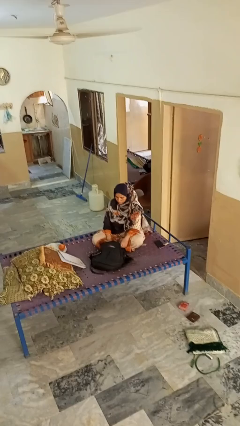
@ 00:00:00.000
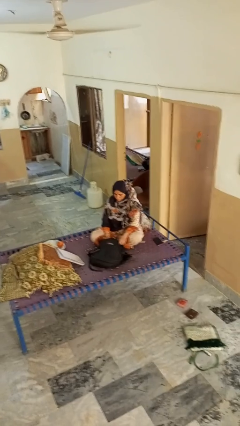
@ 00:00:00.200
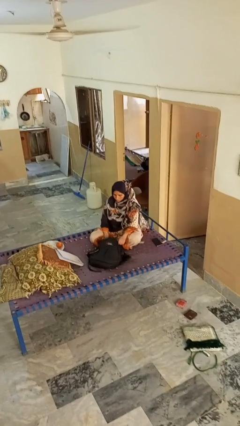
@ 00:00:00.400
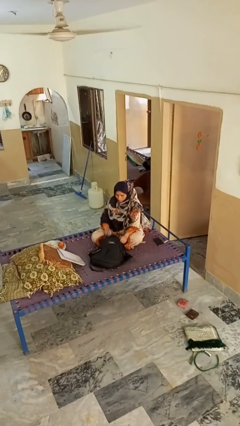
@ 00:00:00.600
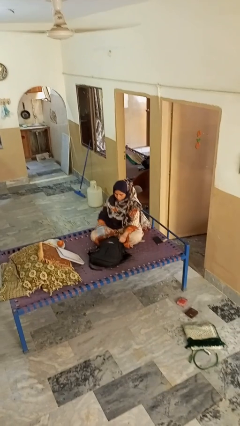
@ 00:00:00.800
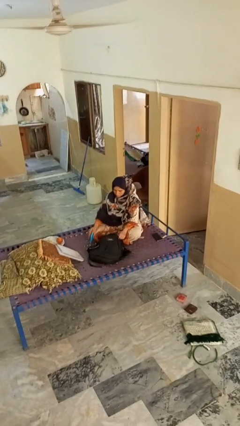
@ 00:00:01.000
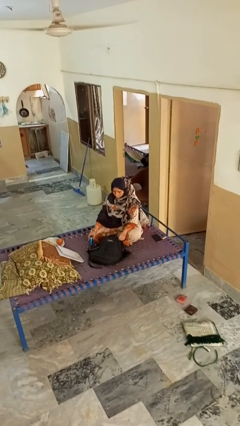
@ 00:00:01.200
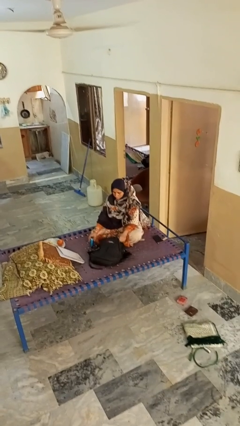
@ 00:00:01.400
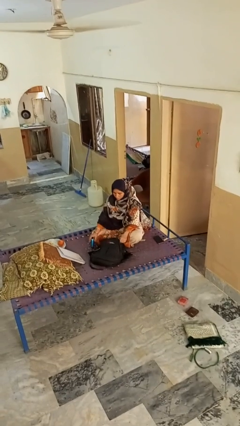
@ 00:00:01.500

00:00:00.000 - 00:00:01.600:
person takes object from bag

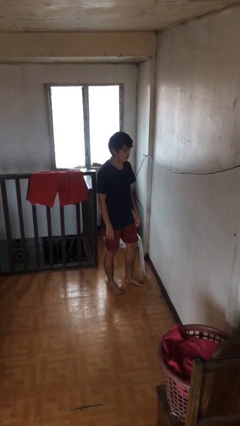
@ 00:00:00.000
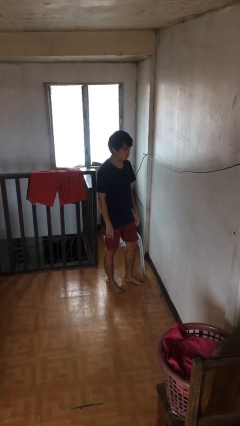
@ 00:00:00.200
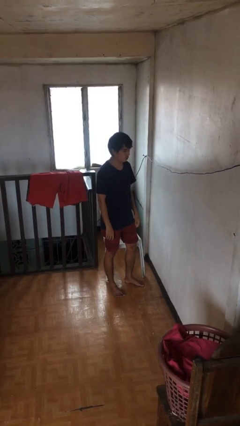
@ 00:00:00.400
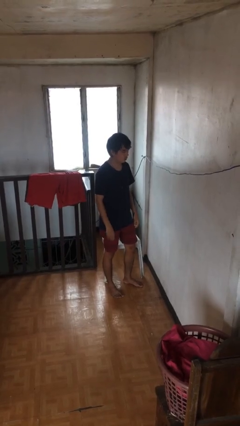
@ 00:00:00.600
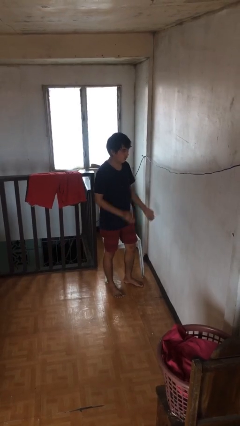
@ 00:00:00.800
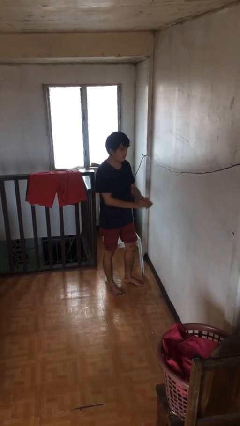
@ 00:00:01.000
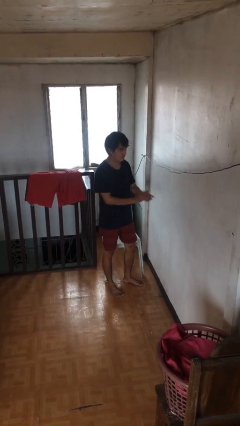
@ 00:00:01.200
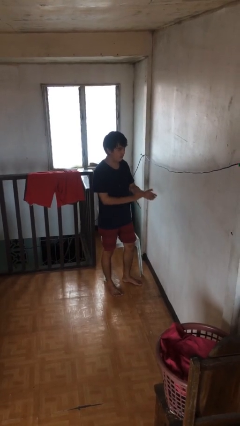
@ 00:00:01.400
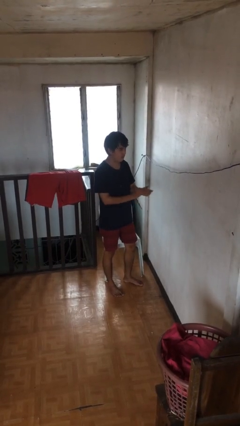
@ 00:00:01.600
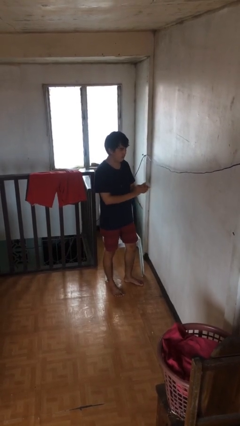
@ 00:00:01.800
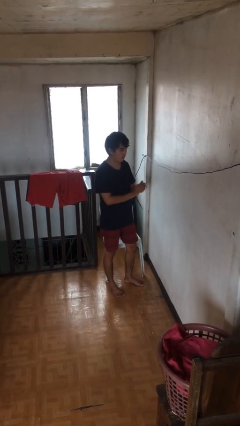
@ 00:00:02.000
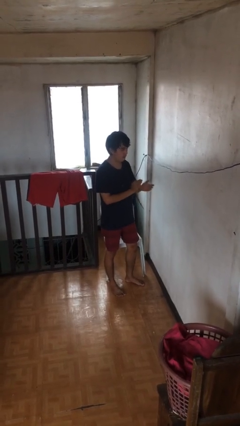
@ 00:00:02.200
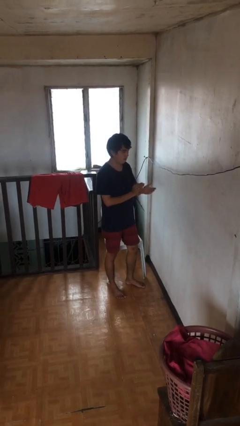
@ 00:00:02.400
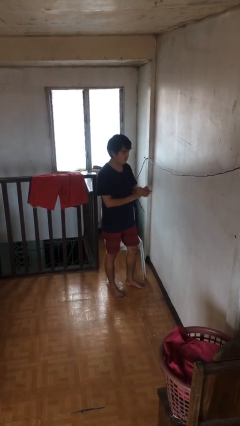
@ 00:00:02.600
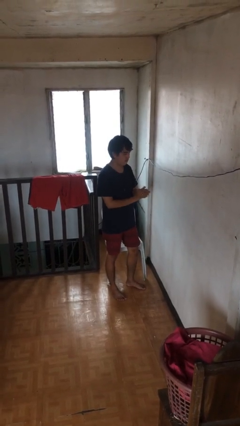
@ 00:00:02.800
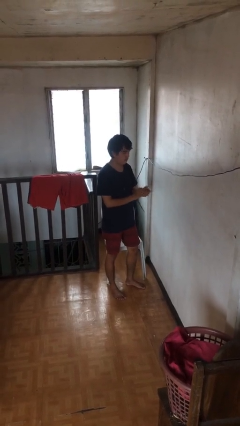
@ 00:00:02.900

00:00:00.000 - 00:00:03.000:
person claps hands

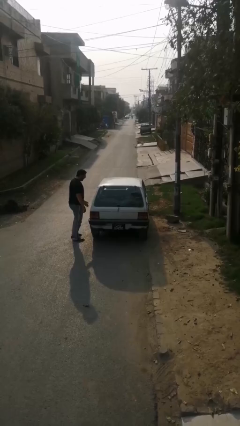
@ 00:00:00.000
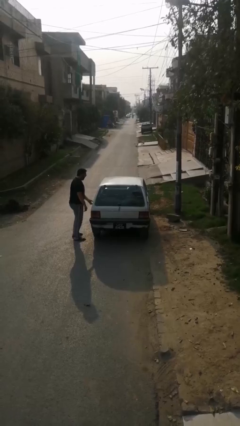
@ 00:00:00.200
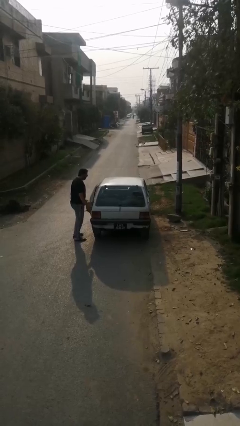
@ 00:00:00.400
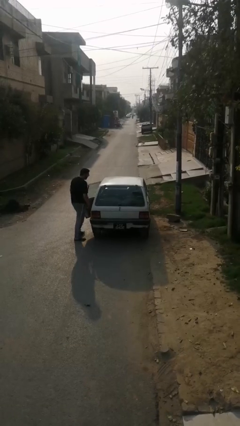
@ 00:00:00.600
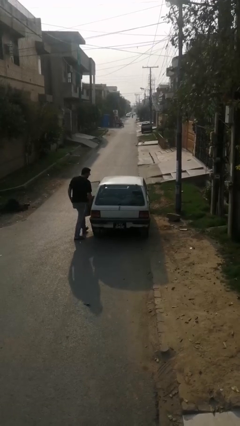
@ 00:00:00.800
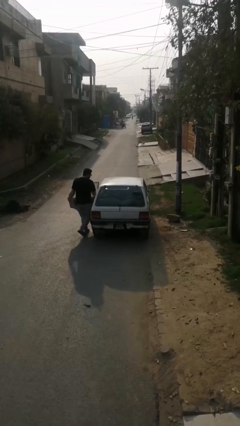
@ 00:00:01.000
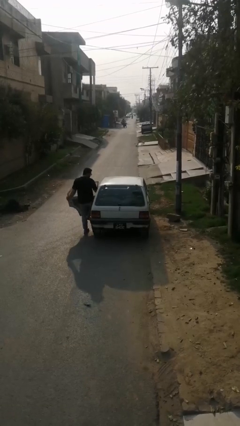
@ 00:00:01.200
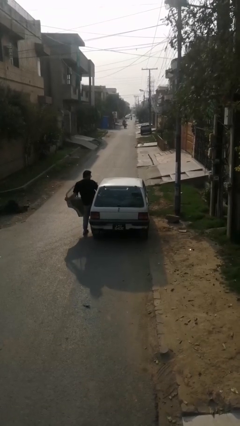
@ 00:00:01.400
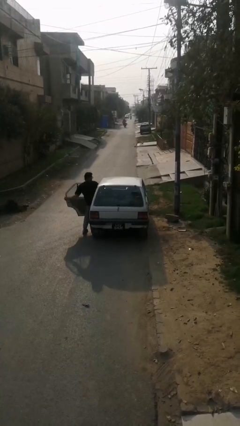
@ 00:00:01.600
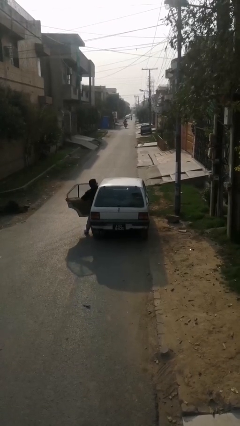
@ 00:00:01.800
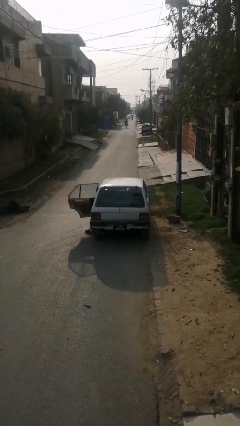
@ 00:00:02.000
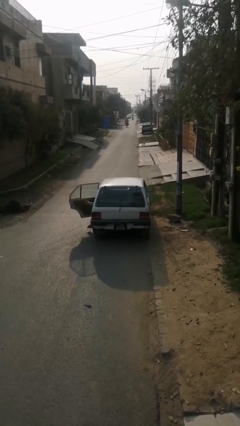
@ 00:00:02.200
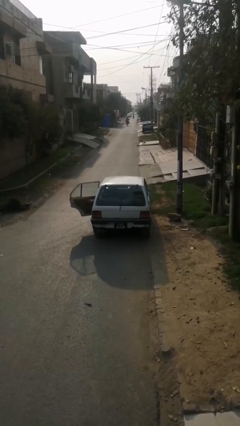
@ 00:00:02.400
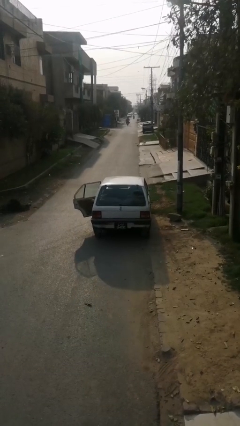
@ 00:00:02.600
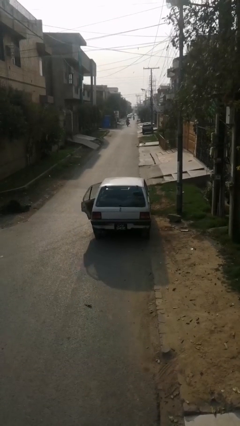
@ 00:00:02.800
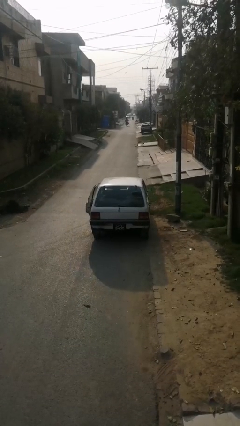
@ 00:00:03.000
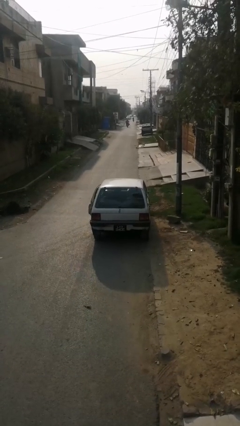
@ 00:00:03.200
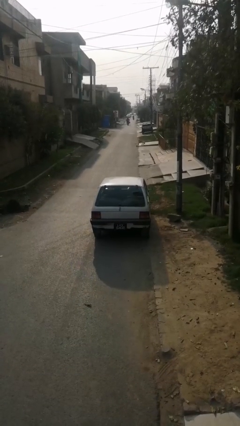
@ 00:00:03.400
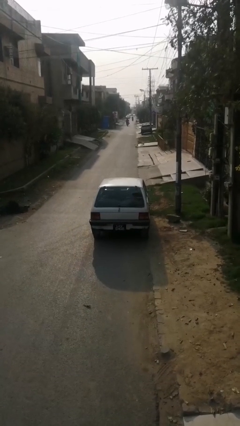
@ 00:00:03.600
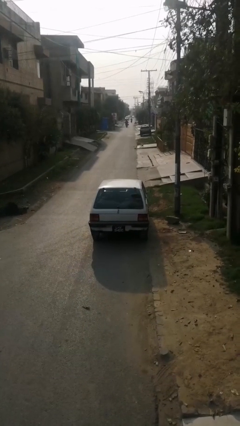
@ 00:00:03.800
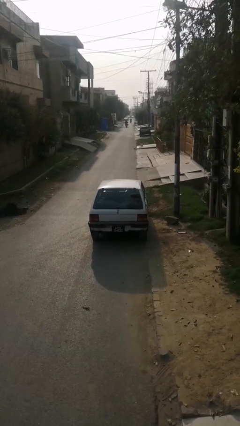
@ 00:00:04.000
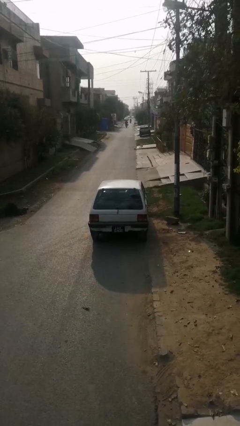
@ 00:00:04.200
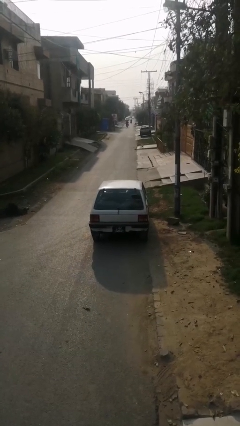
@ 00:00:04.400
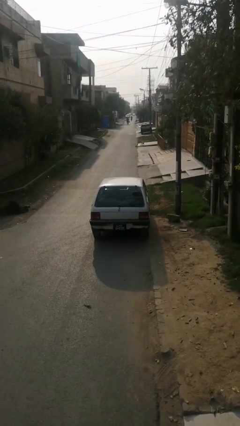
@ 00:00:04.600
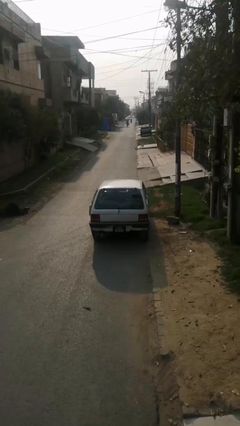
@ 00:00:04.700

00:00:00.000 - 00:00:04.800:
car picks up person

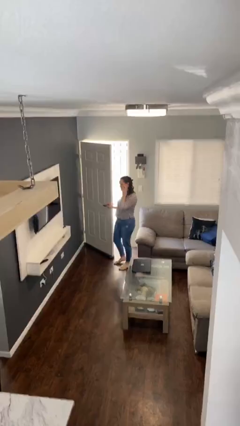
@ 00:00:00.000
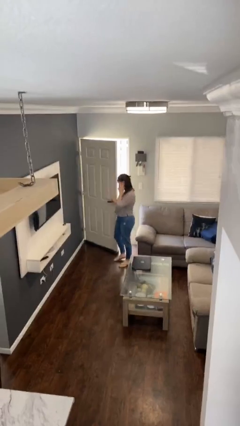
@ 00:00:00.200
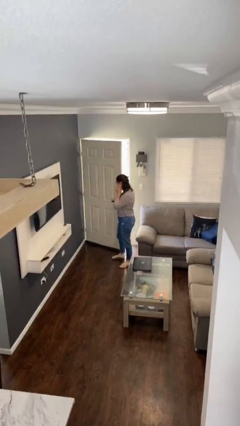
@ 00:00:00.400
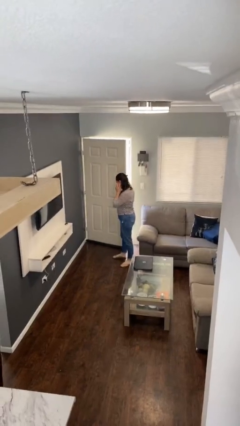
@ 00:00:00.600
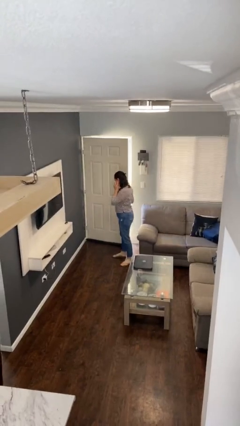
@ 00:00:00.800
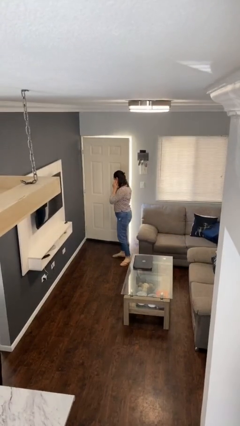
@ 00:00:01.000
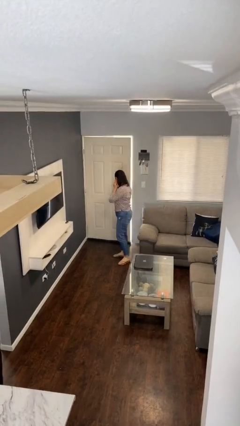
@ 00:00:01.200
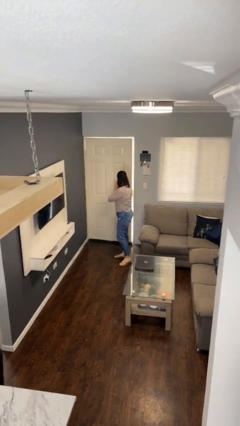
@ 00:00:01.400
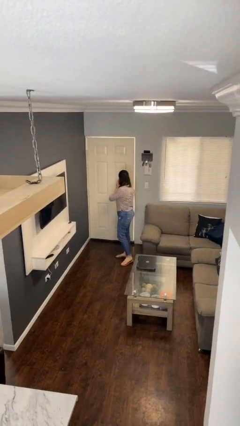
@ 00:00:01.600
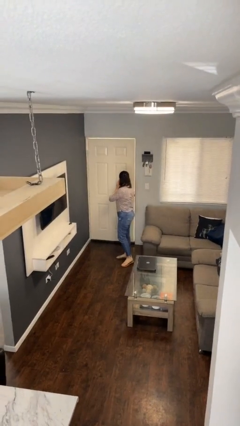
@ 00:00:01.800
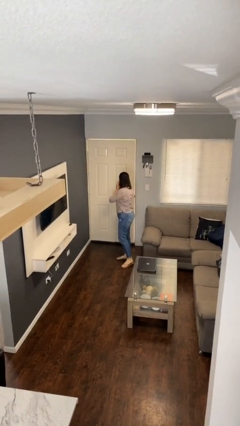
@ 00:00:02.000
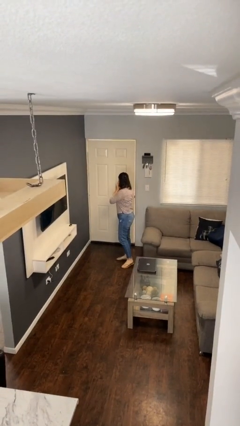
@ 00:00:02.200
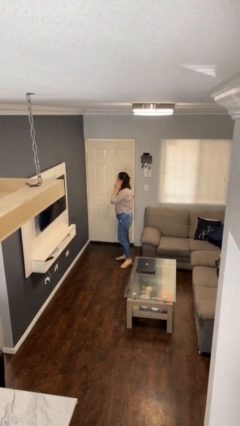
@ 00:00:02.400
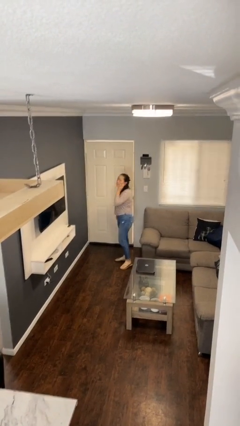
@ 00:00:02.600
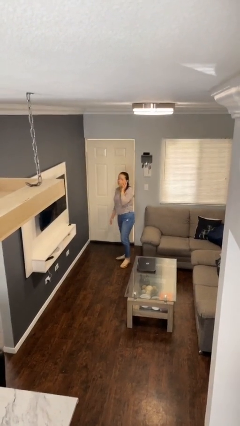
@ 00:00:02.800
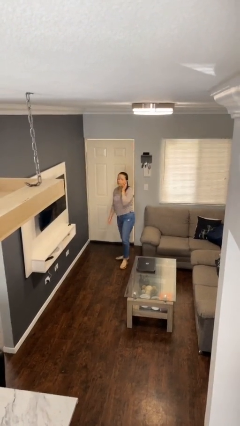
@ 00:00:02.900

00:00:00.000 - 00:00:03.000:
person closes facility door

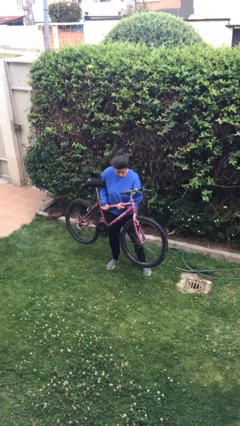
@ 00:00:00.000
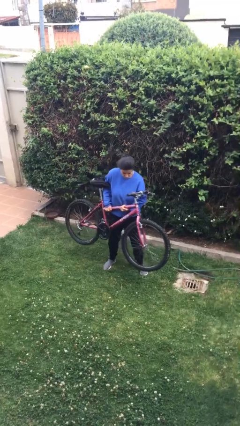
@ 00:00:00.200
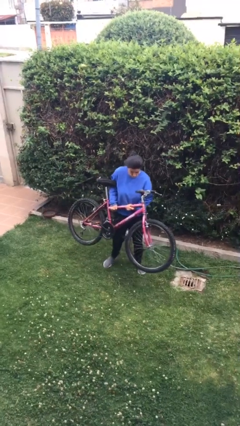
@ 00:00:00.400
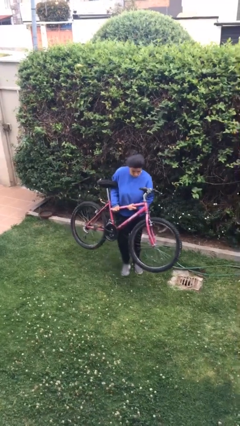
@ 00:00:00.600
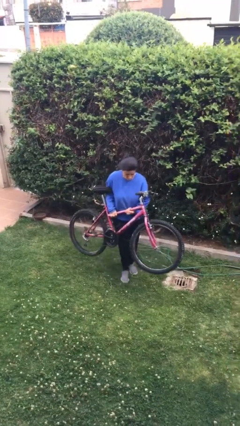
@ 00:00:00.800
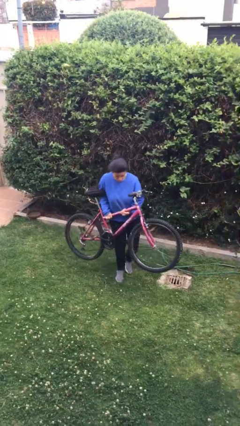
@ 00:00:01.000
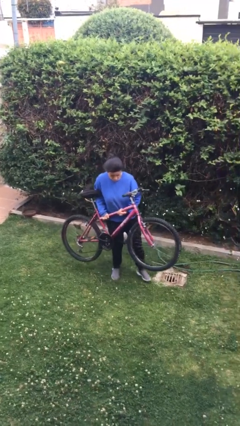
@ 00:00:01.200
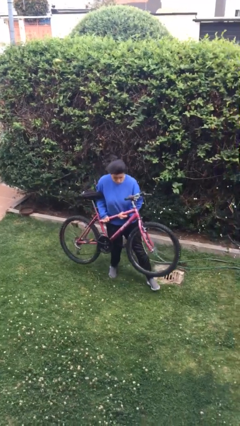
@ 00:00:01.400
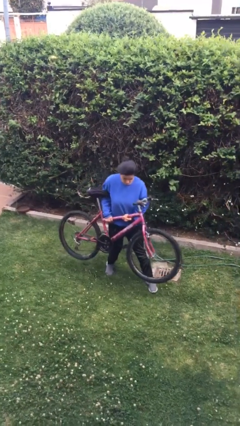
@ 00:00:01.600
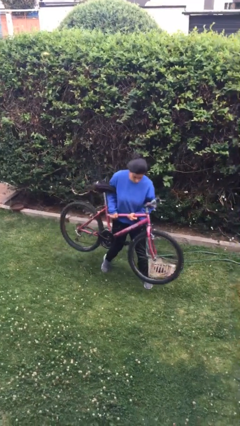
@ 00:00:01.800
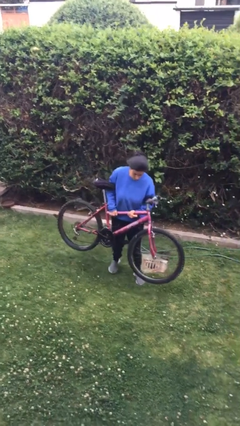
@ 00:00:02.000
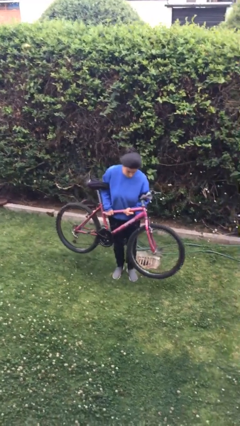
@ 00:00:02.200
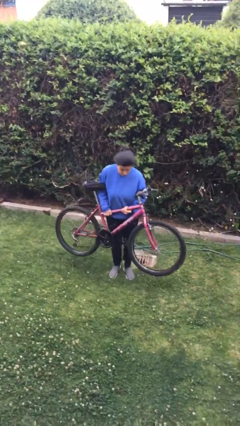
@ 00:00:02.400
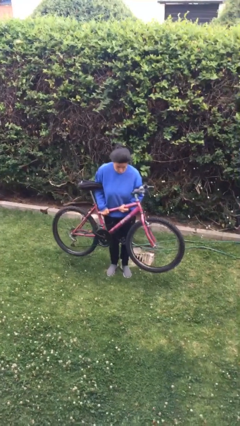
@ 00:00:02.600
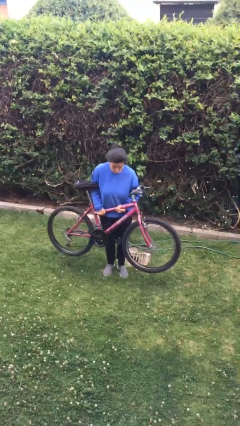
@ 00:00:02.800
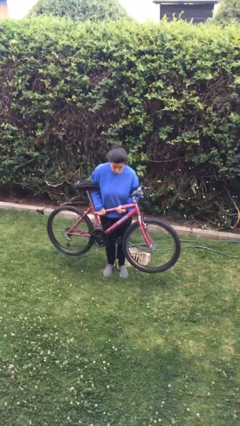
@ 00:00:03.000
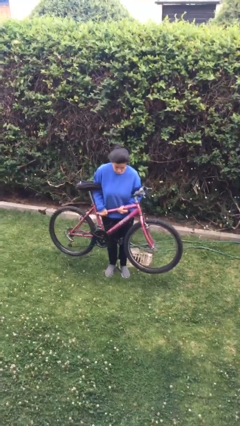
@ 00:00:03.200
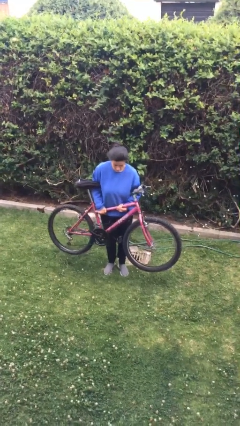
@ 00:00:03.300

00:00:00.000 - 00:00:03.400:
person carries bicycle

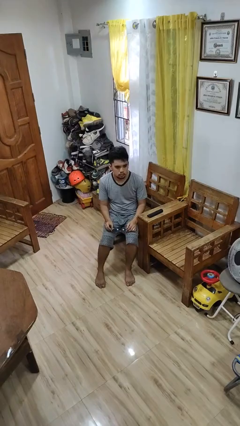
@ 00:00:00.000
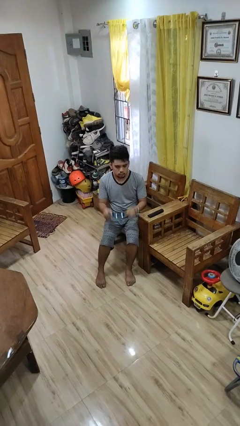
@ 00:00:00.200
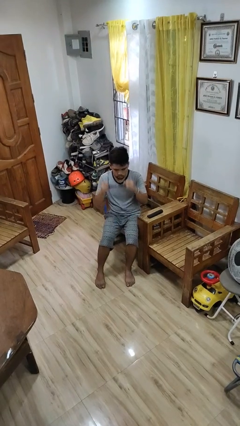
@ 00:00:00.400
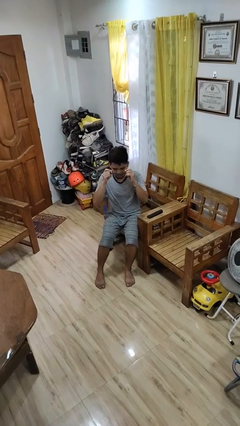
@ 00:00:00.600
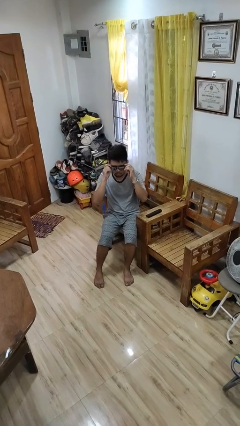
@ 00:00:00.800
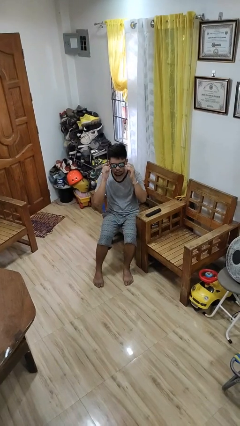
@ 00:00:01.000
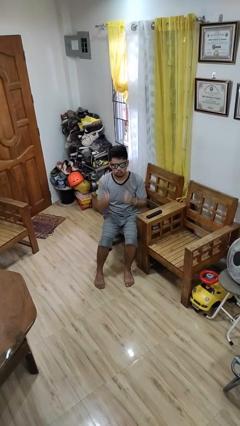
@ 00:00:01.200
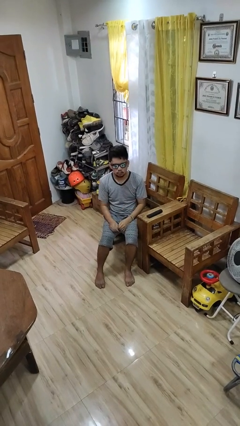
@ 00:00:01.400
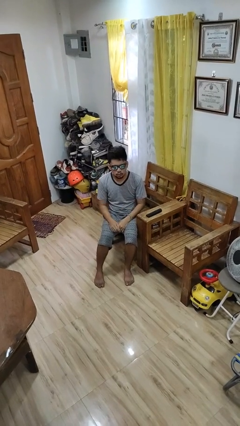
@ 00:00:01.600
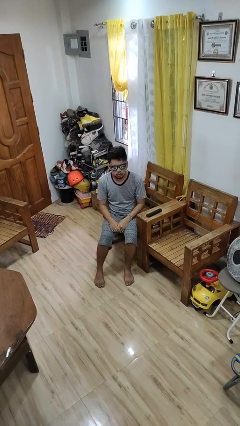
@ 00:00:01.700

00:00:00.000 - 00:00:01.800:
person puts on sunglasses
